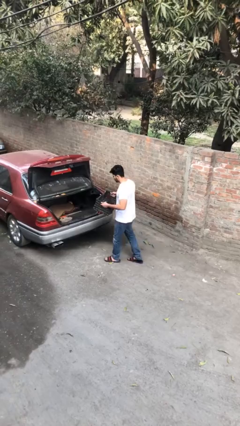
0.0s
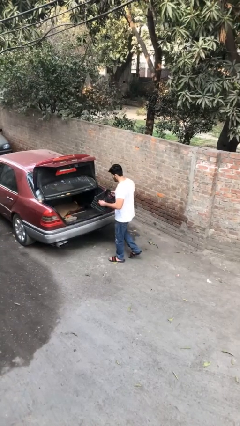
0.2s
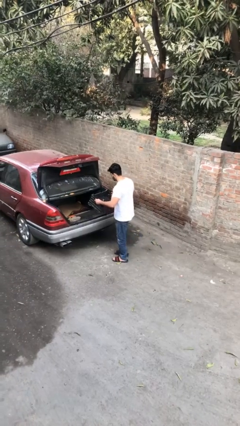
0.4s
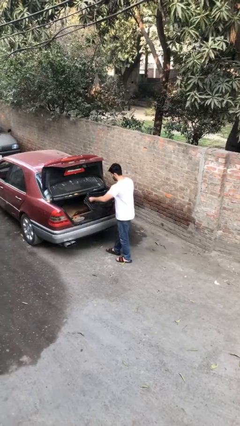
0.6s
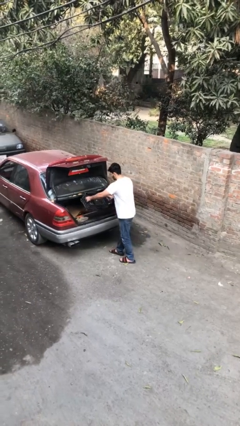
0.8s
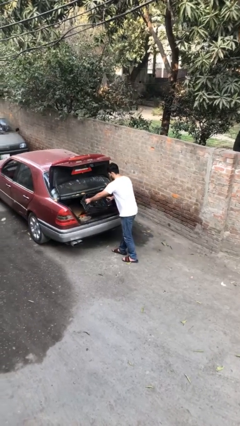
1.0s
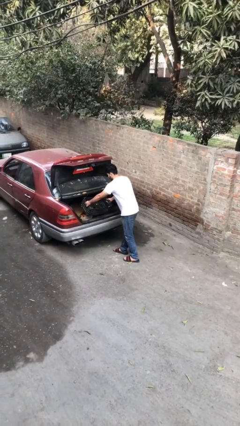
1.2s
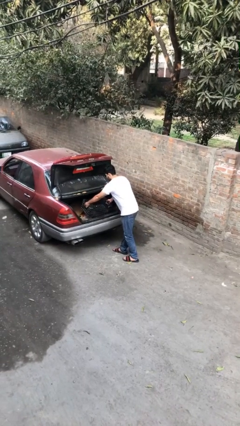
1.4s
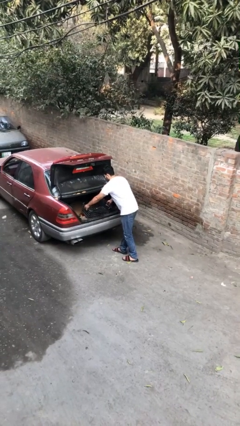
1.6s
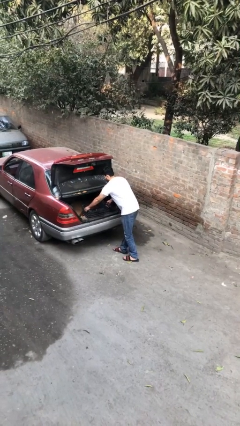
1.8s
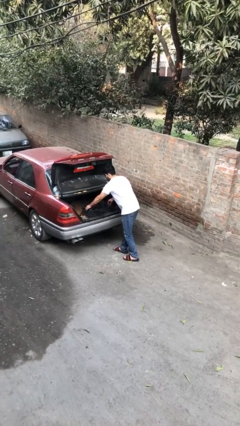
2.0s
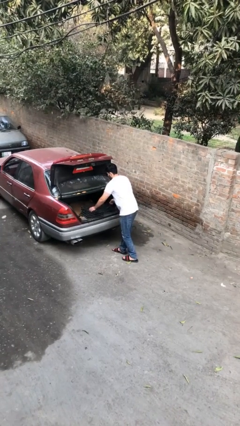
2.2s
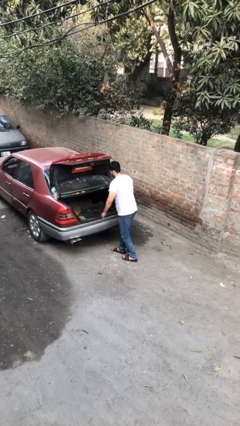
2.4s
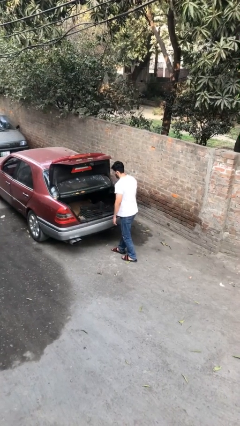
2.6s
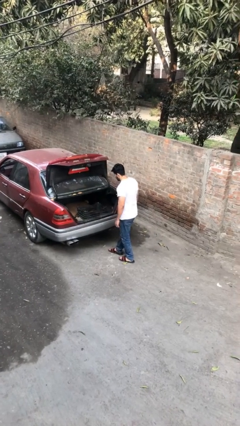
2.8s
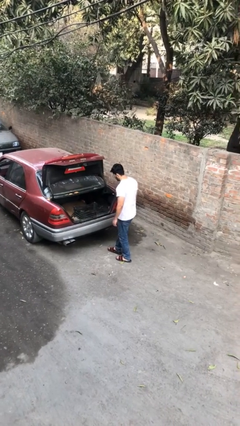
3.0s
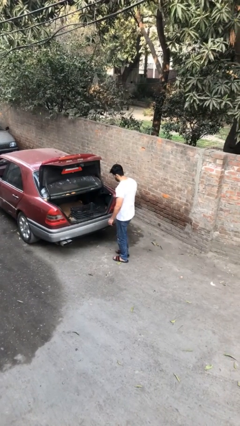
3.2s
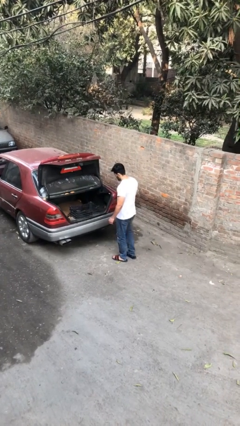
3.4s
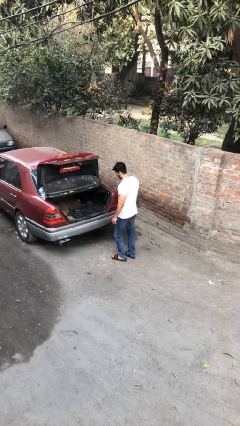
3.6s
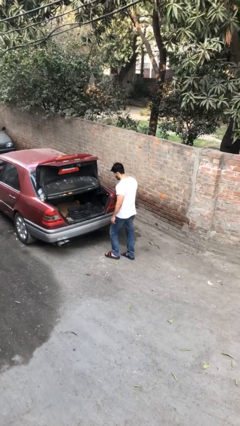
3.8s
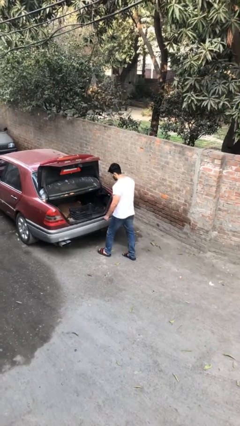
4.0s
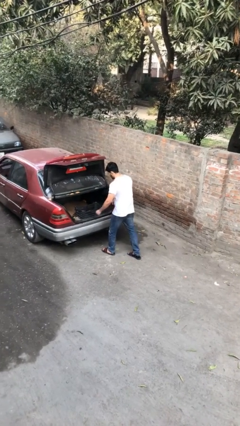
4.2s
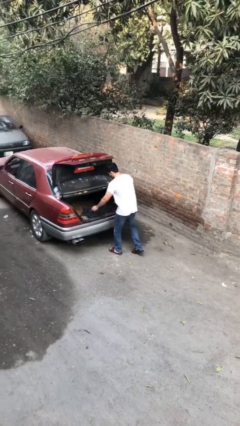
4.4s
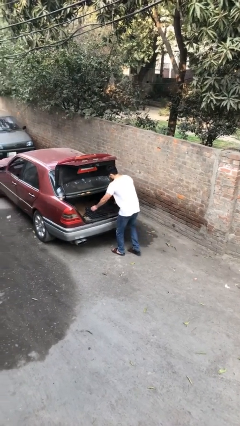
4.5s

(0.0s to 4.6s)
person loads car

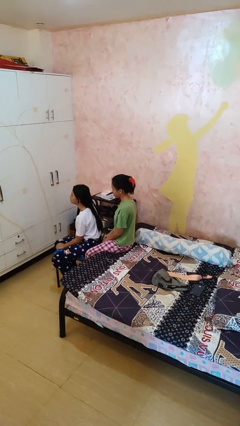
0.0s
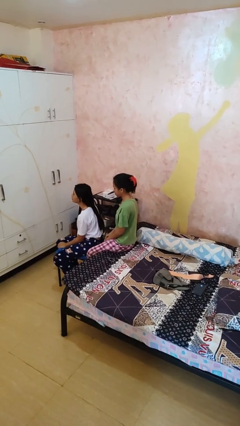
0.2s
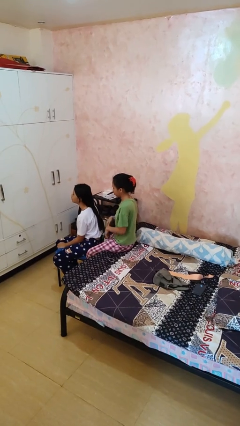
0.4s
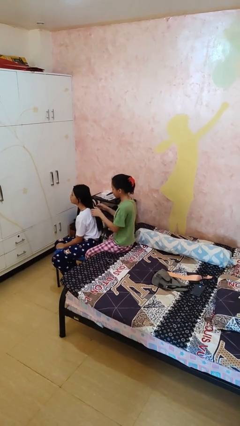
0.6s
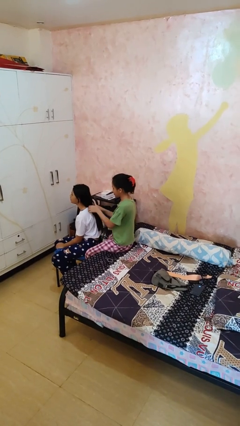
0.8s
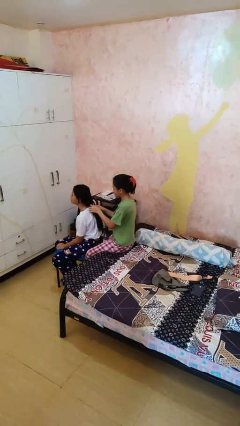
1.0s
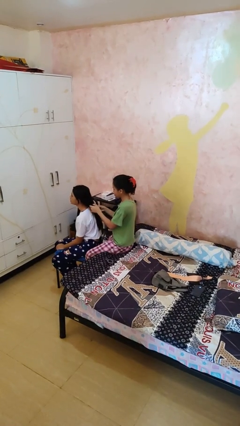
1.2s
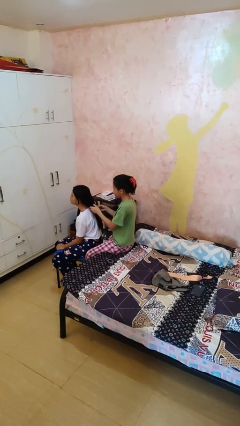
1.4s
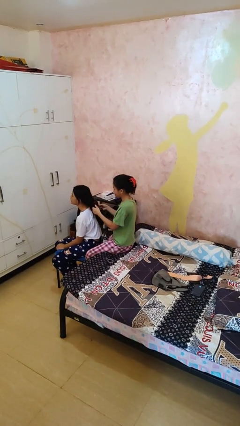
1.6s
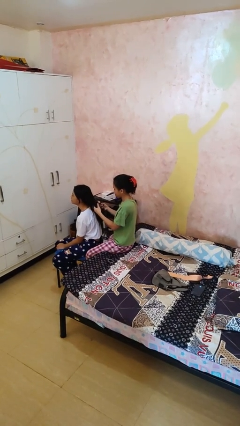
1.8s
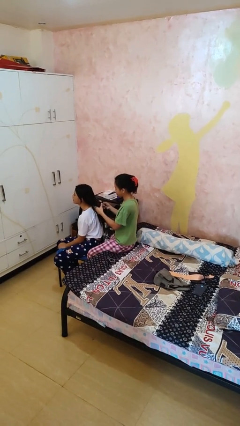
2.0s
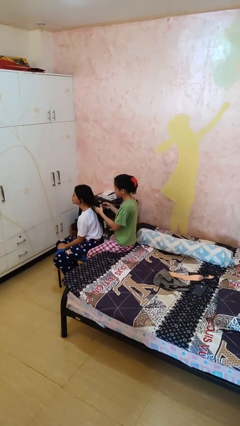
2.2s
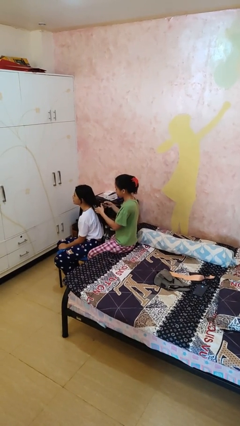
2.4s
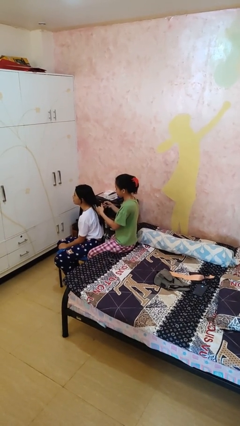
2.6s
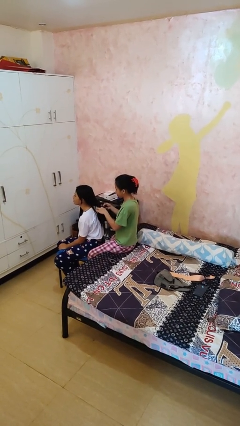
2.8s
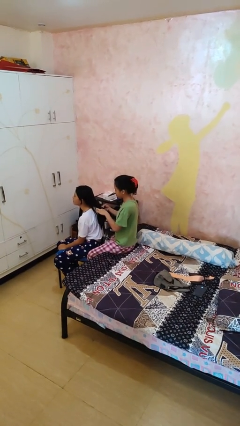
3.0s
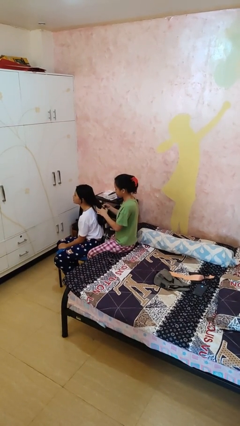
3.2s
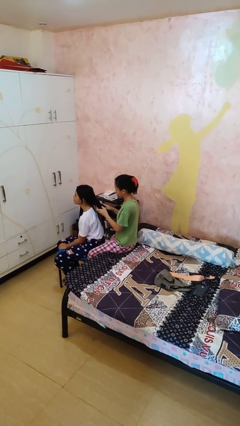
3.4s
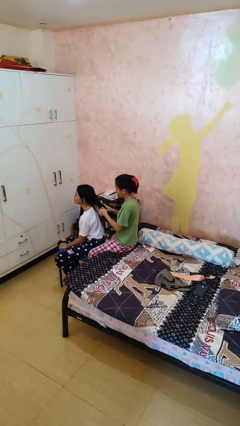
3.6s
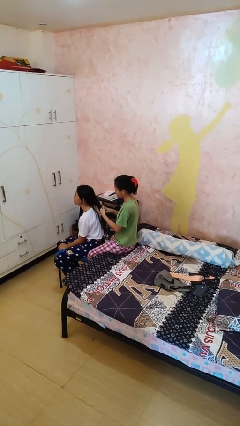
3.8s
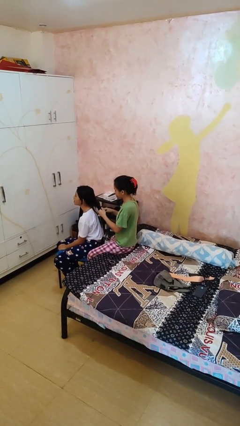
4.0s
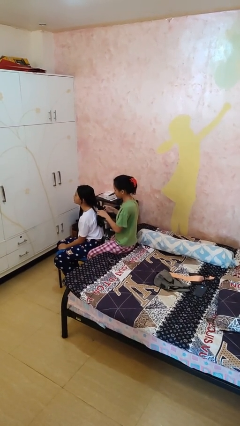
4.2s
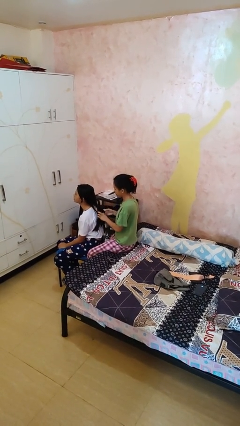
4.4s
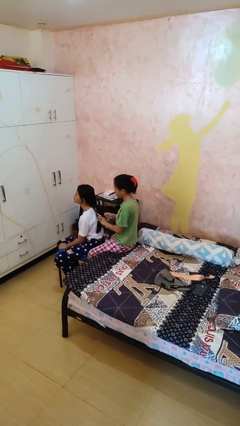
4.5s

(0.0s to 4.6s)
person braids hair of person

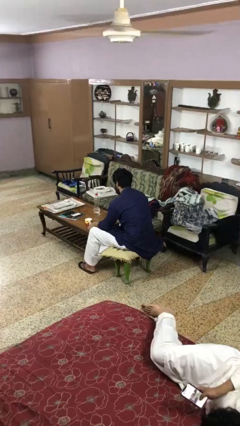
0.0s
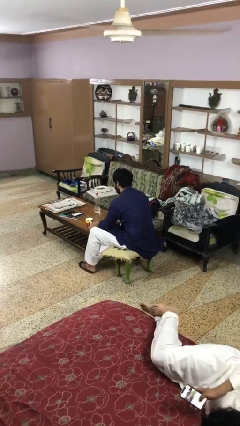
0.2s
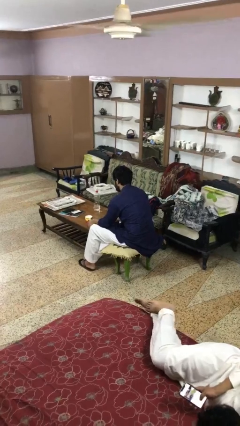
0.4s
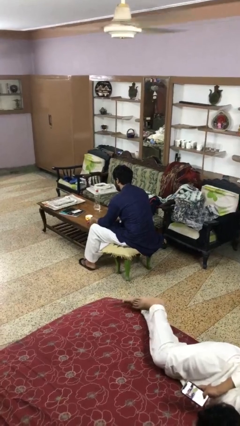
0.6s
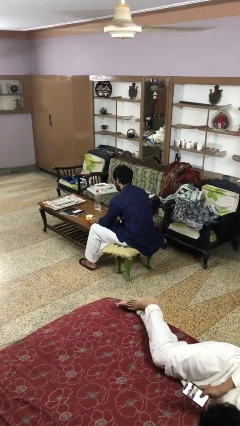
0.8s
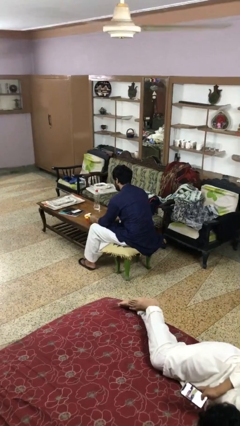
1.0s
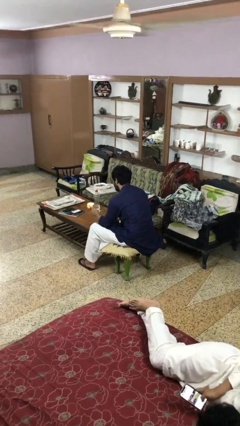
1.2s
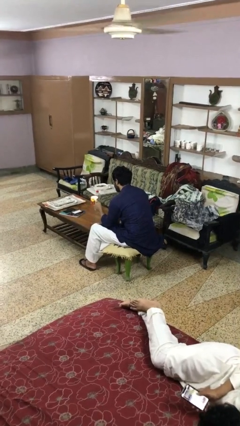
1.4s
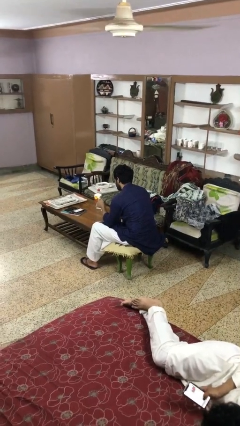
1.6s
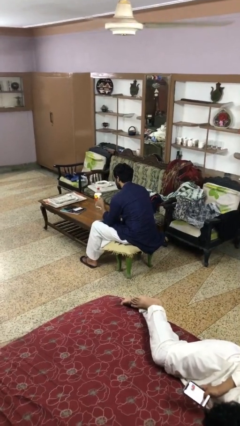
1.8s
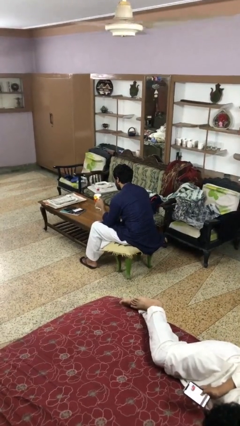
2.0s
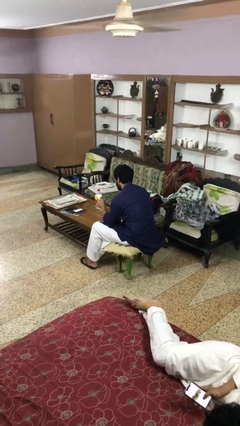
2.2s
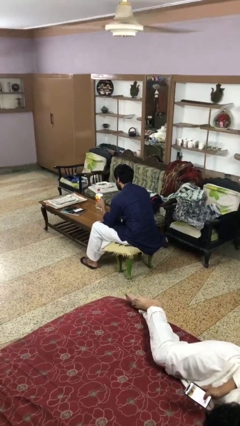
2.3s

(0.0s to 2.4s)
person picks up object from table

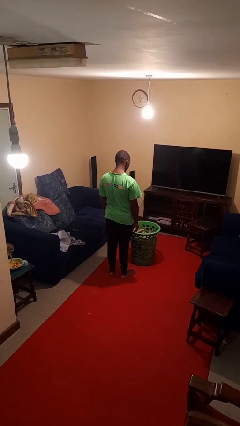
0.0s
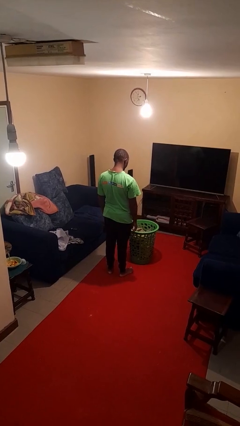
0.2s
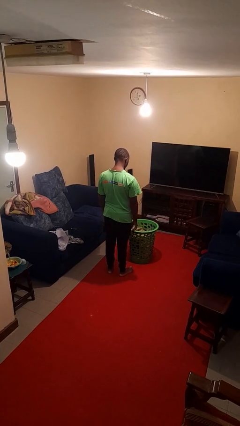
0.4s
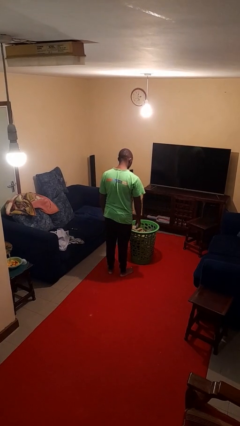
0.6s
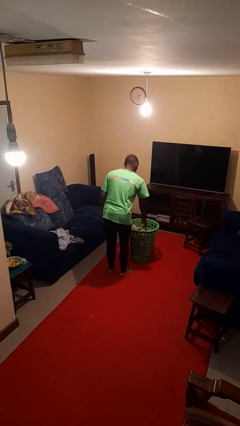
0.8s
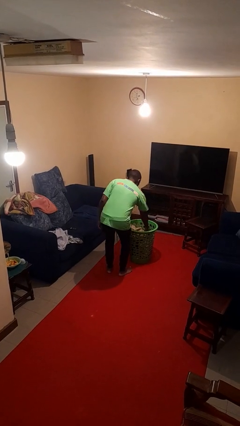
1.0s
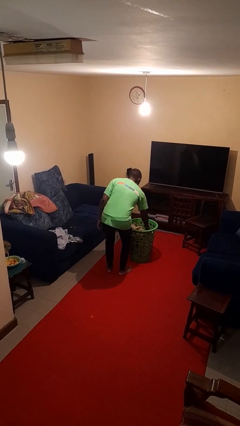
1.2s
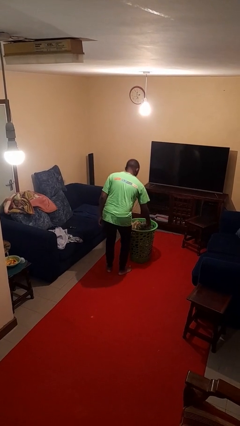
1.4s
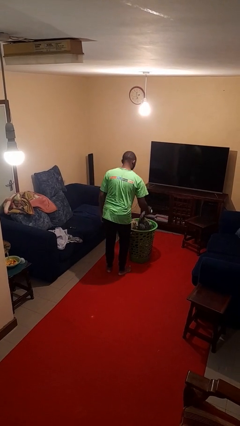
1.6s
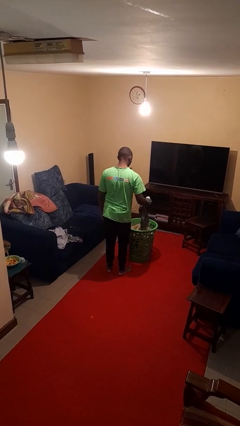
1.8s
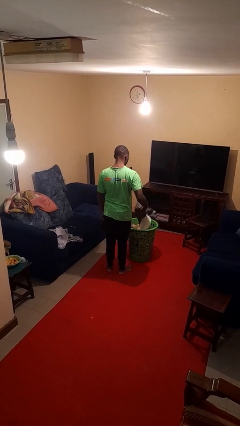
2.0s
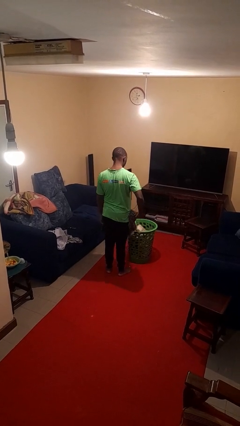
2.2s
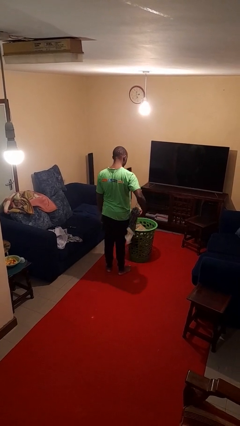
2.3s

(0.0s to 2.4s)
person takes object from basket

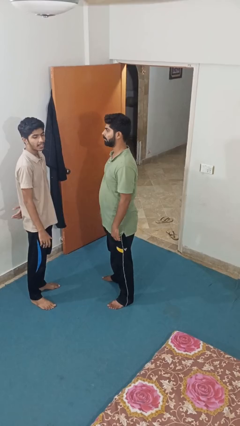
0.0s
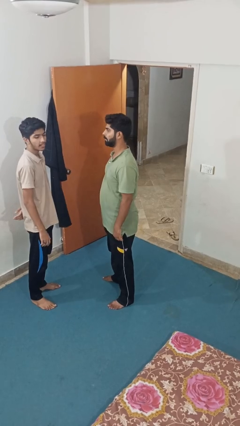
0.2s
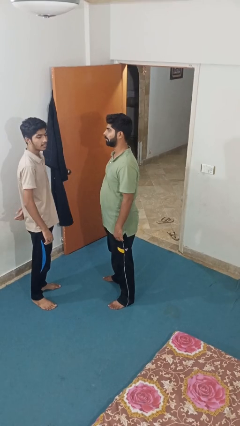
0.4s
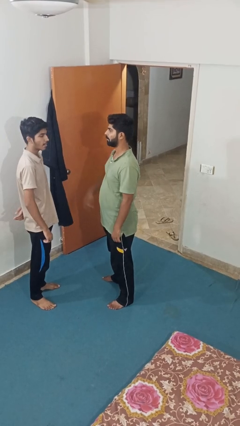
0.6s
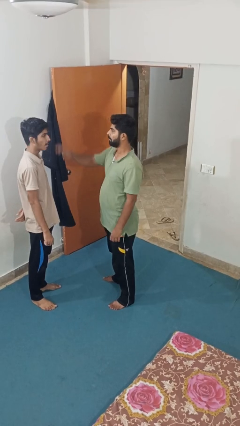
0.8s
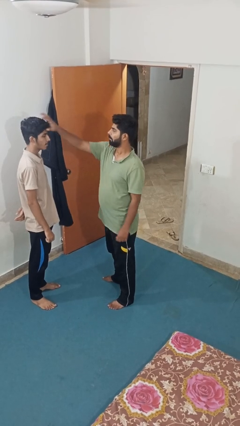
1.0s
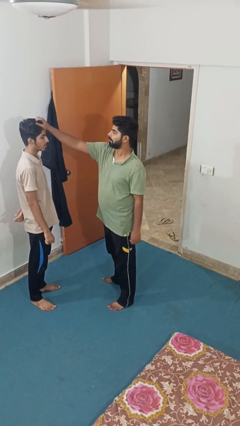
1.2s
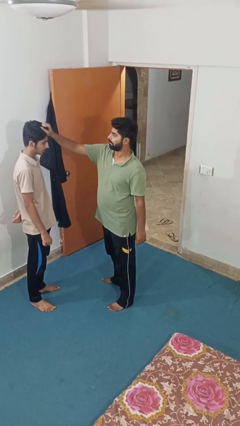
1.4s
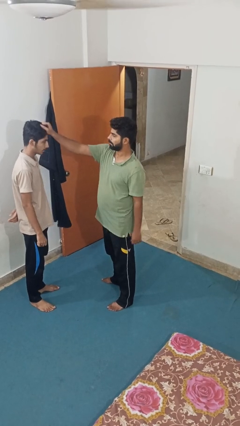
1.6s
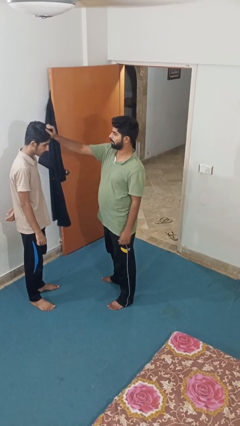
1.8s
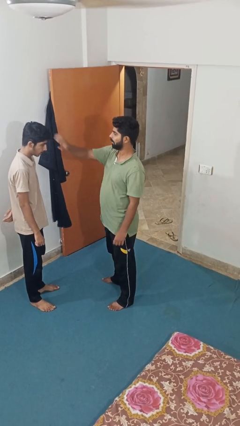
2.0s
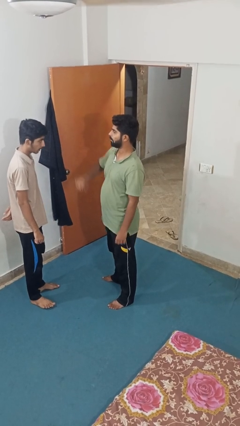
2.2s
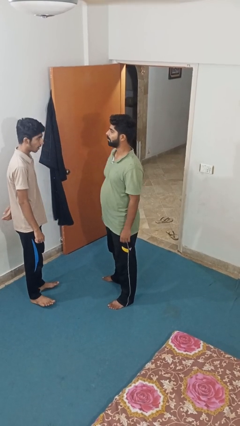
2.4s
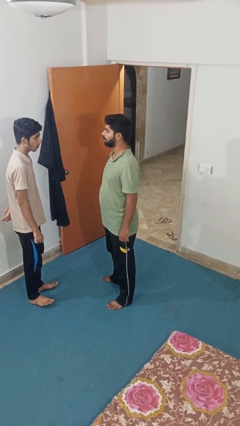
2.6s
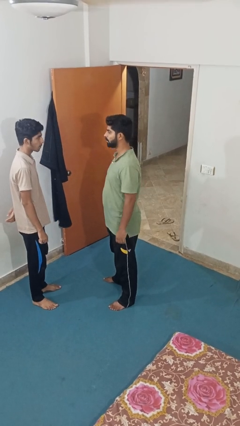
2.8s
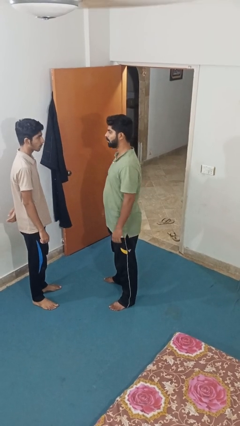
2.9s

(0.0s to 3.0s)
person grabs person by hair

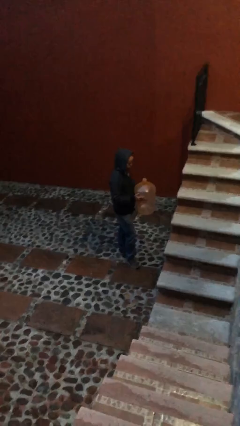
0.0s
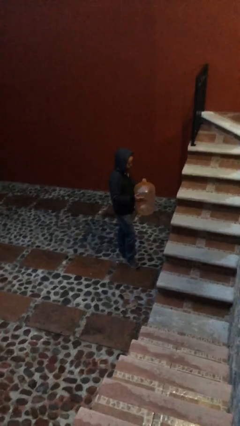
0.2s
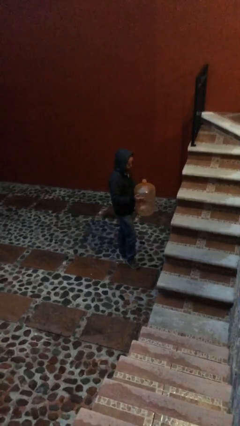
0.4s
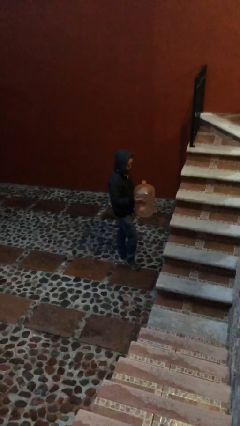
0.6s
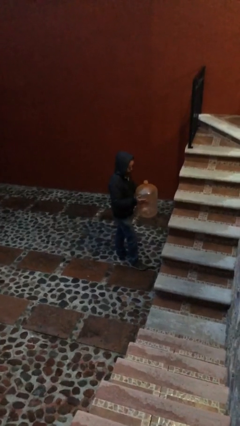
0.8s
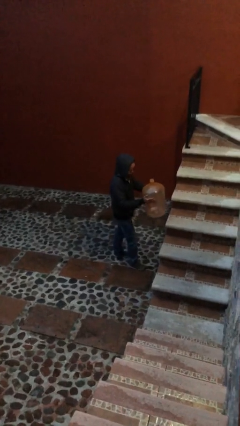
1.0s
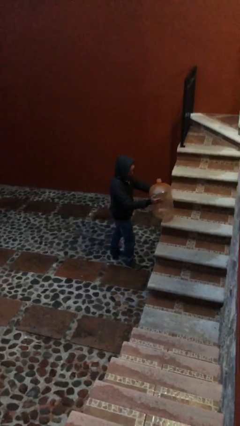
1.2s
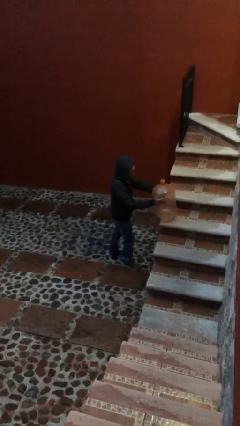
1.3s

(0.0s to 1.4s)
person puts down object on table
